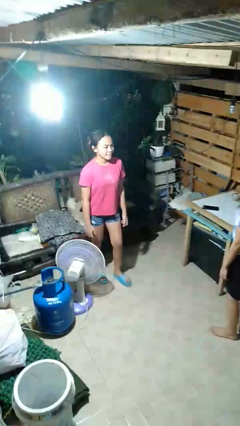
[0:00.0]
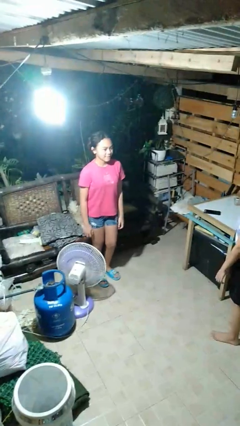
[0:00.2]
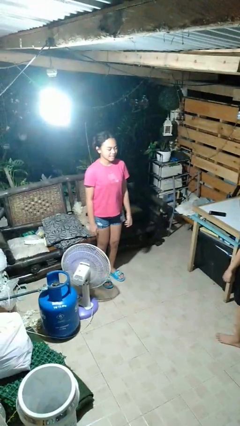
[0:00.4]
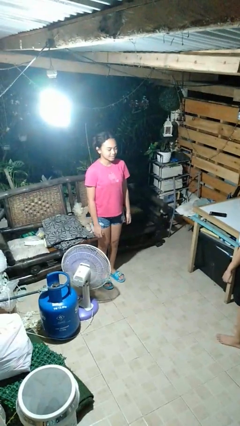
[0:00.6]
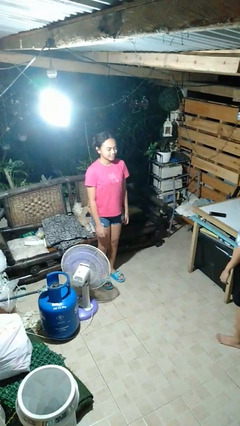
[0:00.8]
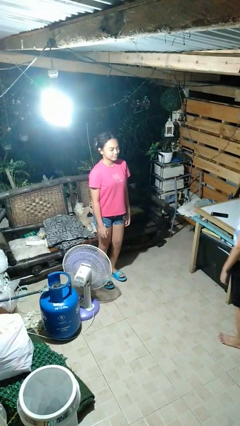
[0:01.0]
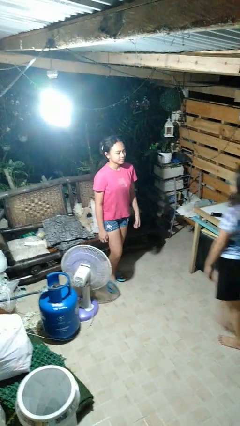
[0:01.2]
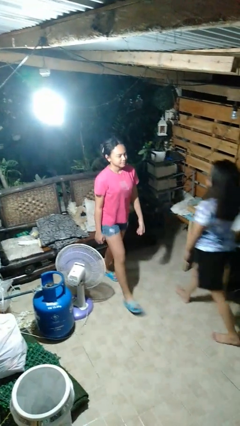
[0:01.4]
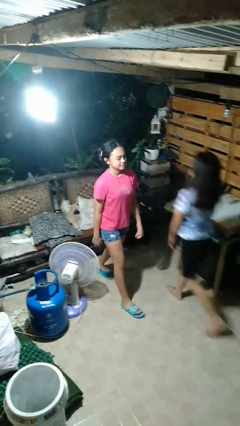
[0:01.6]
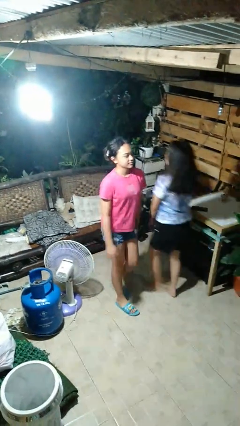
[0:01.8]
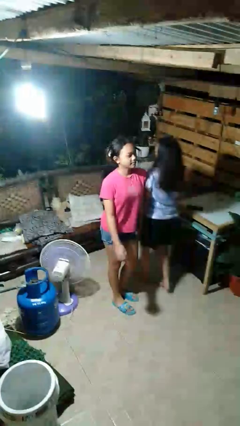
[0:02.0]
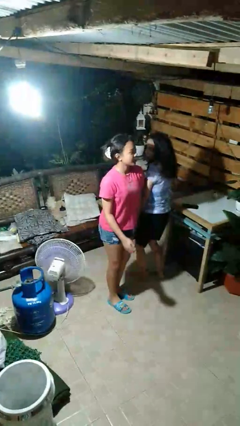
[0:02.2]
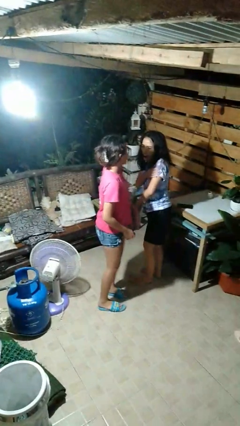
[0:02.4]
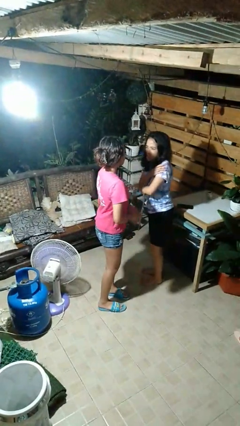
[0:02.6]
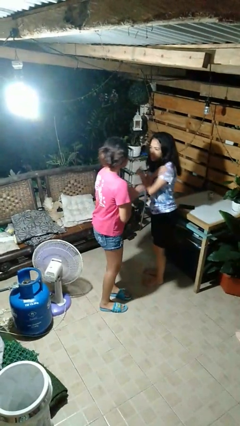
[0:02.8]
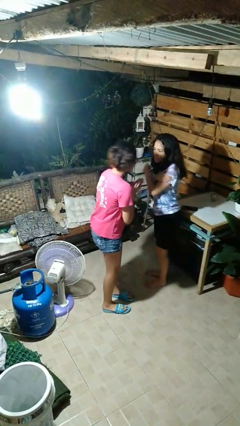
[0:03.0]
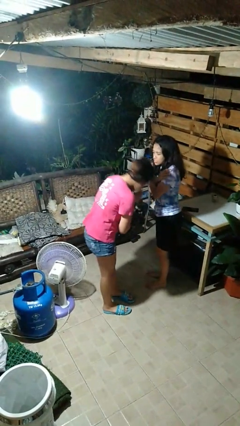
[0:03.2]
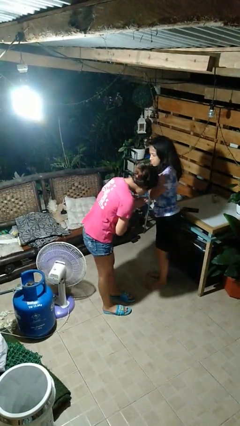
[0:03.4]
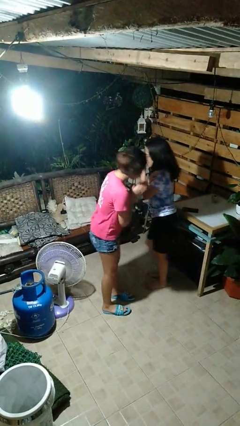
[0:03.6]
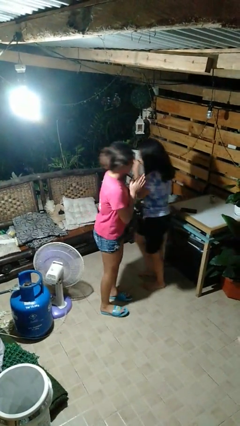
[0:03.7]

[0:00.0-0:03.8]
person bumps into person

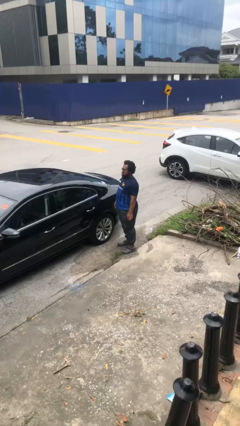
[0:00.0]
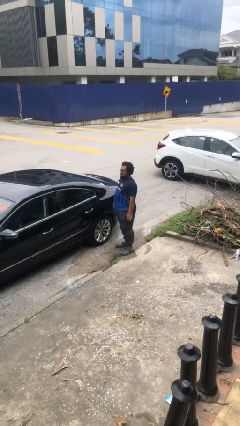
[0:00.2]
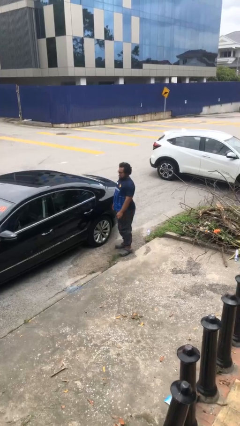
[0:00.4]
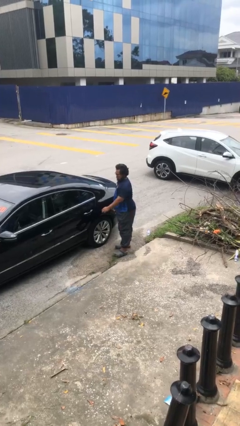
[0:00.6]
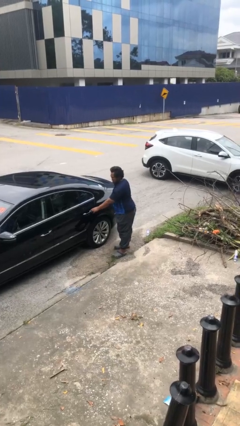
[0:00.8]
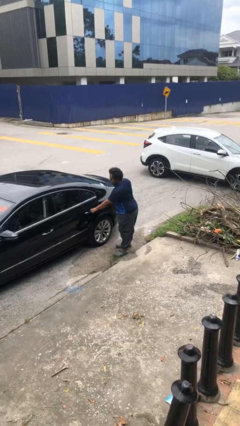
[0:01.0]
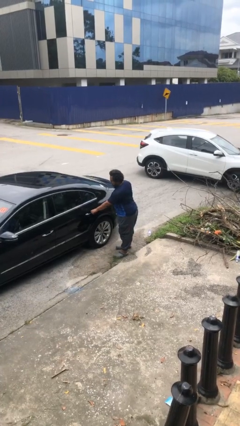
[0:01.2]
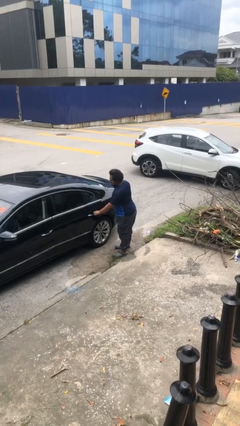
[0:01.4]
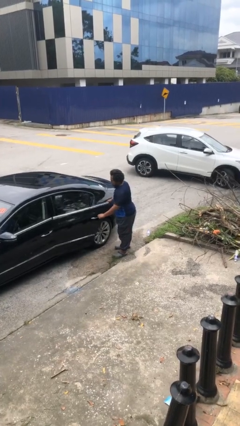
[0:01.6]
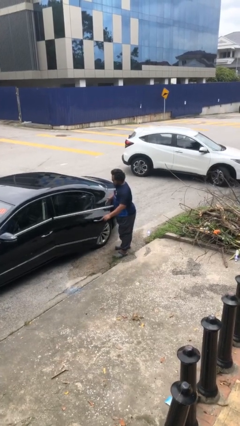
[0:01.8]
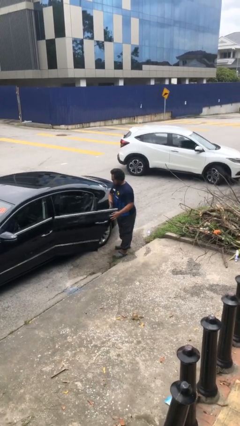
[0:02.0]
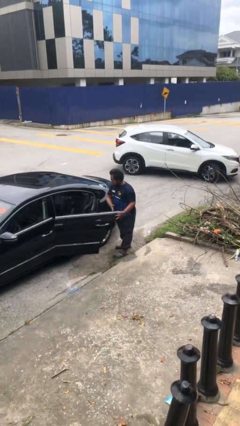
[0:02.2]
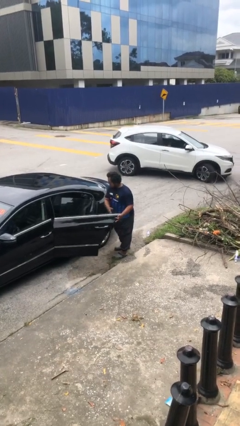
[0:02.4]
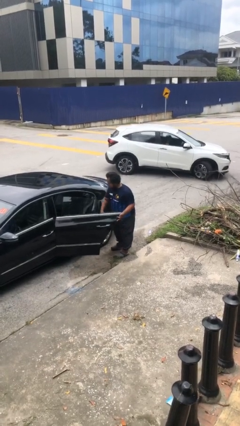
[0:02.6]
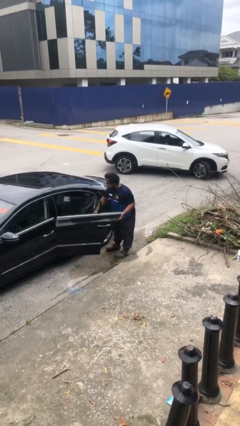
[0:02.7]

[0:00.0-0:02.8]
person opens car door

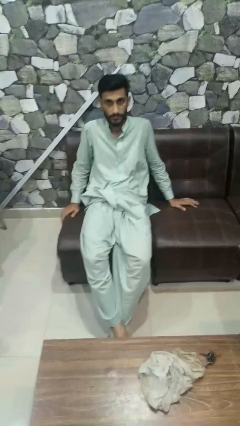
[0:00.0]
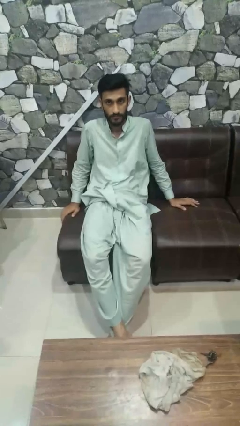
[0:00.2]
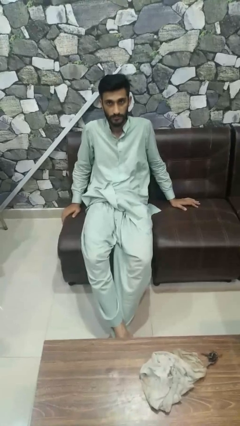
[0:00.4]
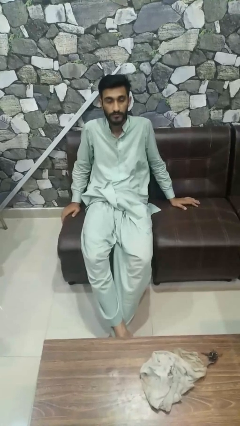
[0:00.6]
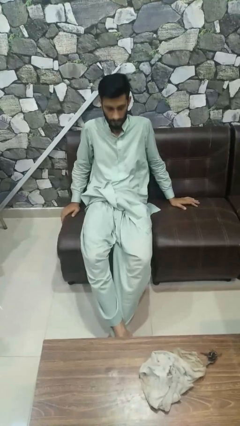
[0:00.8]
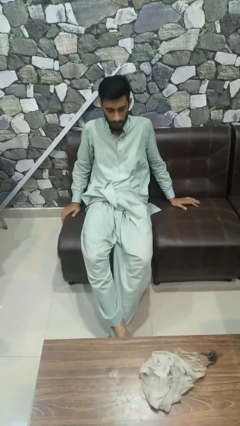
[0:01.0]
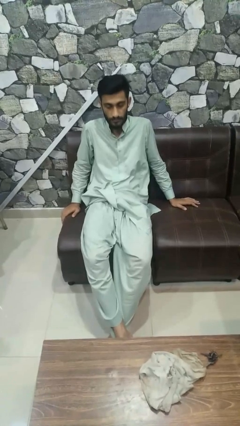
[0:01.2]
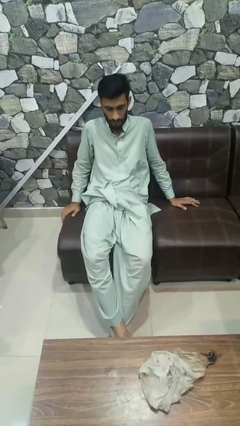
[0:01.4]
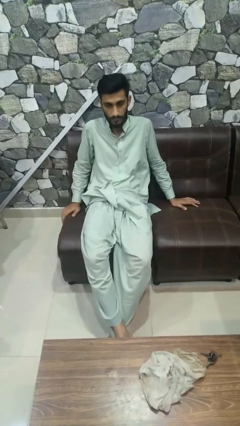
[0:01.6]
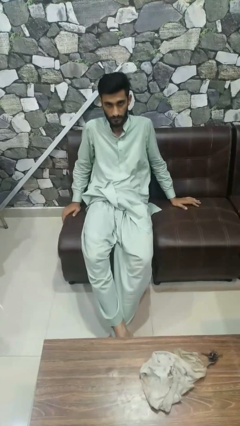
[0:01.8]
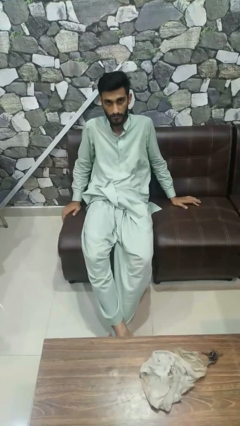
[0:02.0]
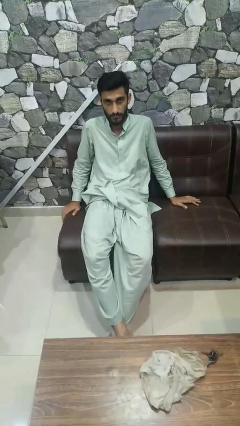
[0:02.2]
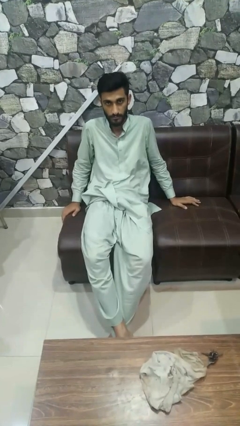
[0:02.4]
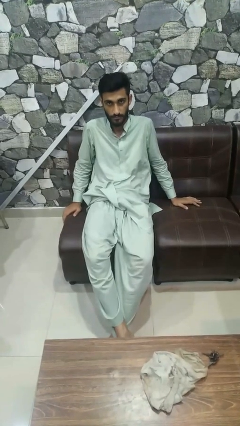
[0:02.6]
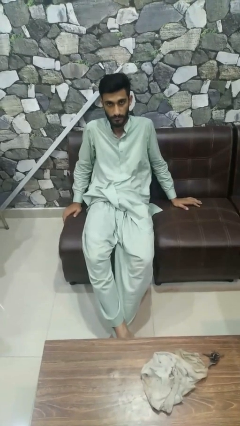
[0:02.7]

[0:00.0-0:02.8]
person nods head

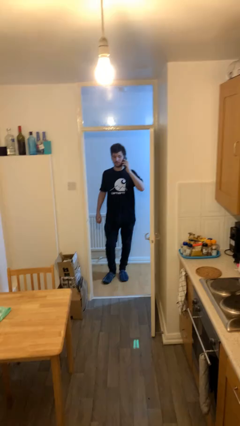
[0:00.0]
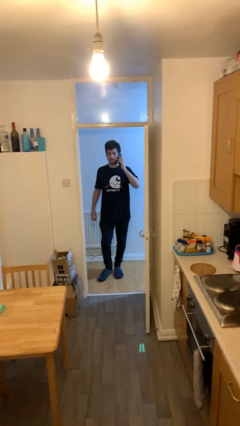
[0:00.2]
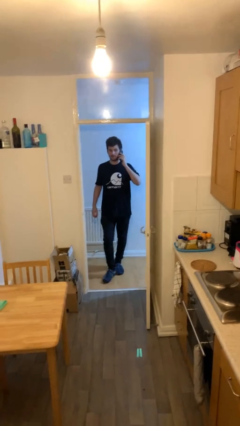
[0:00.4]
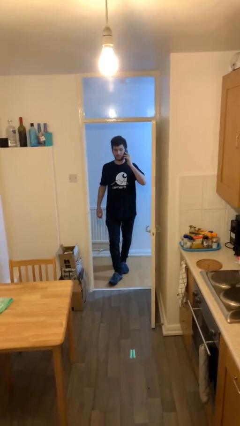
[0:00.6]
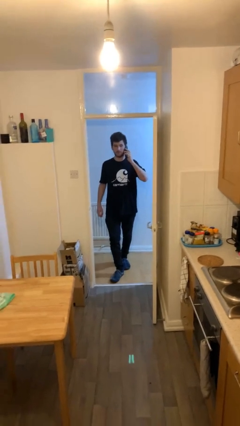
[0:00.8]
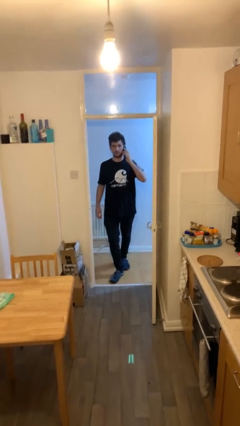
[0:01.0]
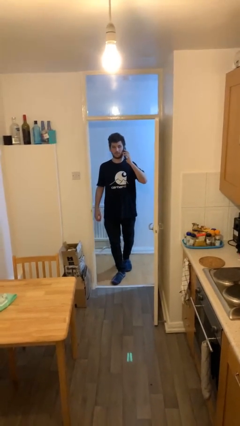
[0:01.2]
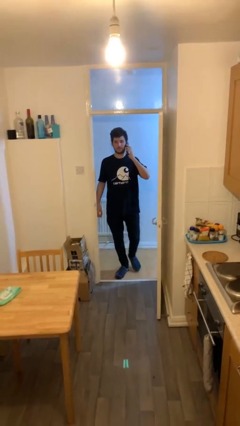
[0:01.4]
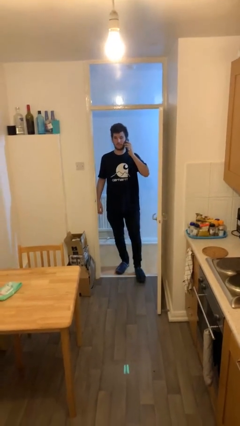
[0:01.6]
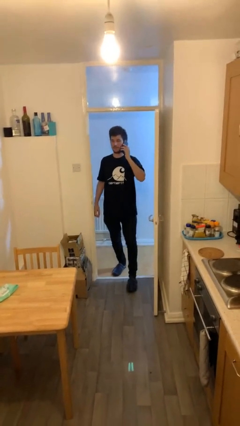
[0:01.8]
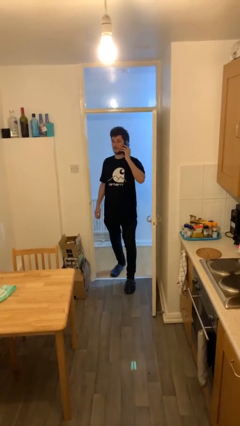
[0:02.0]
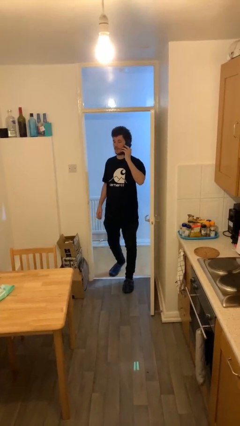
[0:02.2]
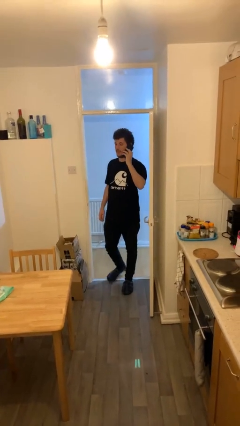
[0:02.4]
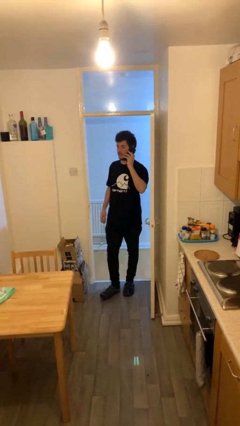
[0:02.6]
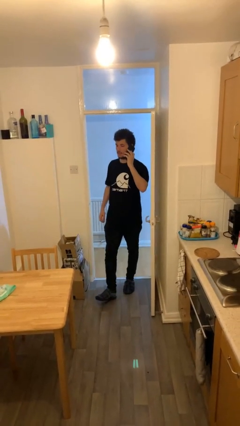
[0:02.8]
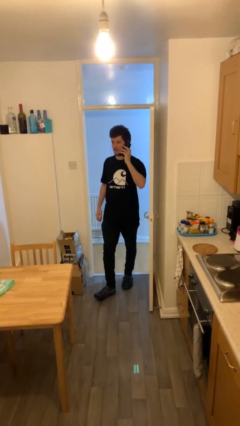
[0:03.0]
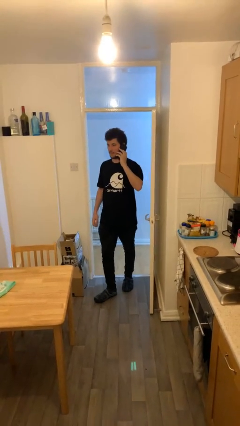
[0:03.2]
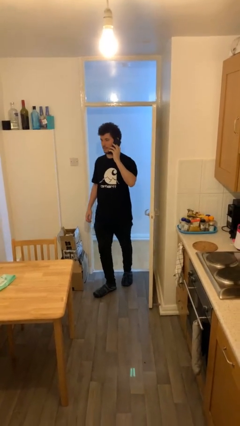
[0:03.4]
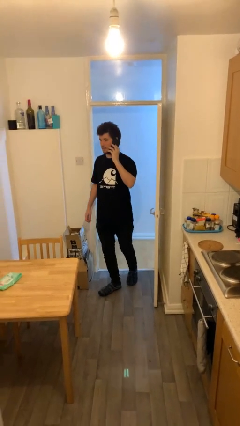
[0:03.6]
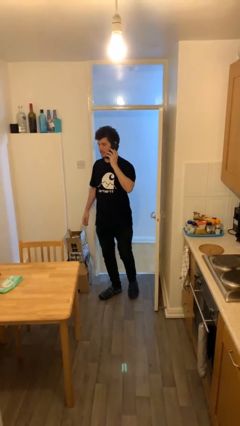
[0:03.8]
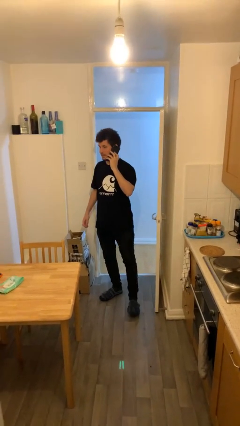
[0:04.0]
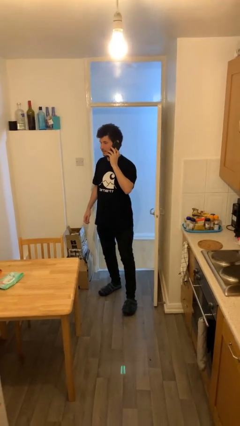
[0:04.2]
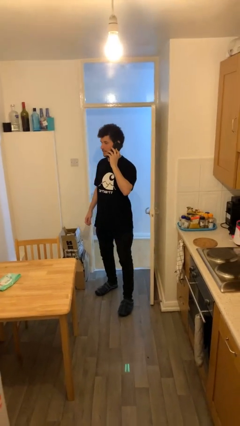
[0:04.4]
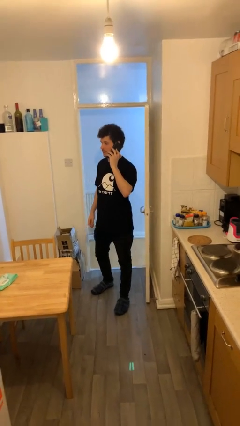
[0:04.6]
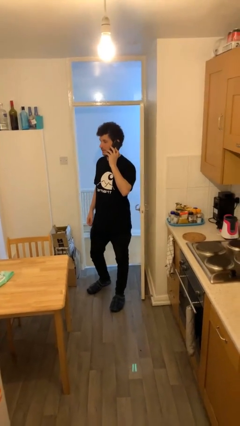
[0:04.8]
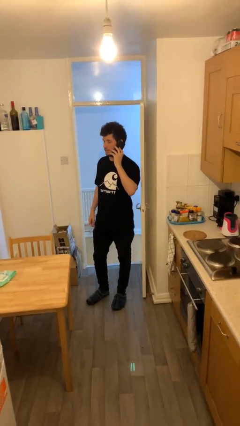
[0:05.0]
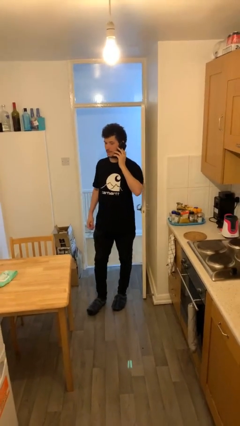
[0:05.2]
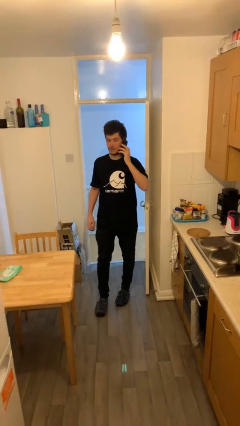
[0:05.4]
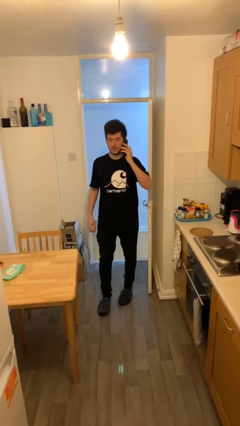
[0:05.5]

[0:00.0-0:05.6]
person enters scene through structure

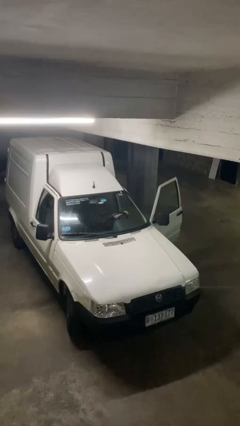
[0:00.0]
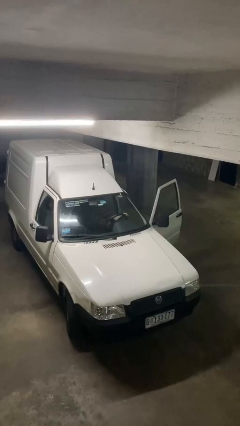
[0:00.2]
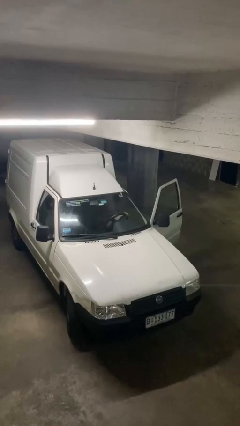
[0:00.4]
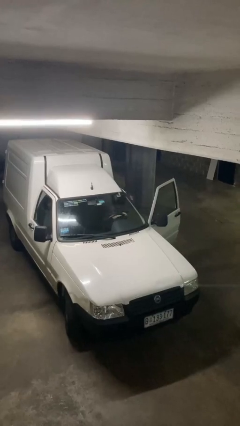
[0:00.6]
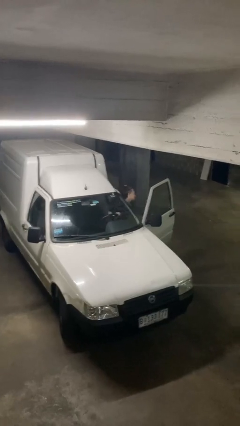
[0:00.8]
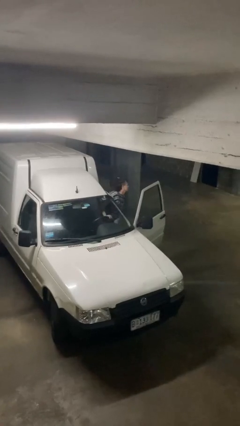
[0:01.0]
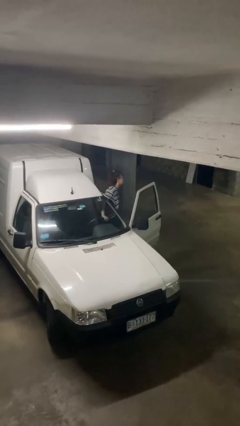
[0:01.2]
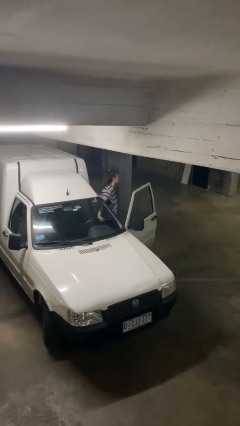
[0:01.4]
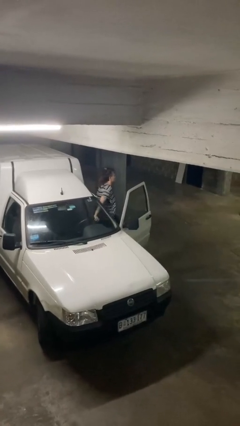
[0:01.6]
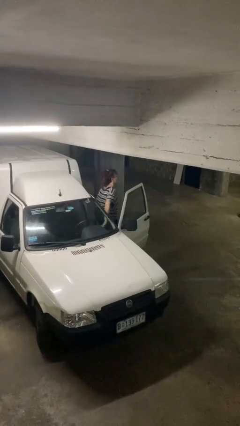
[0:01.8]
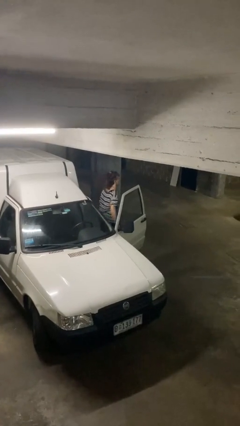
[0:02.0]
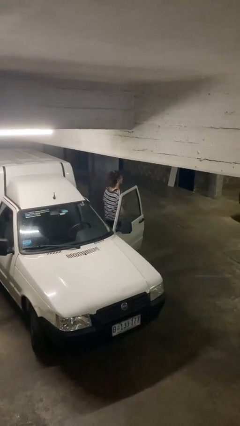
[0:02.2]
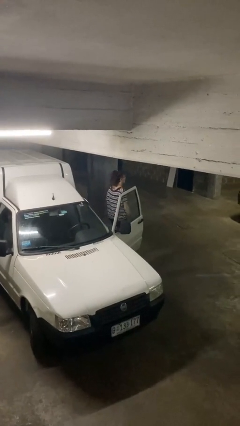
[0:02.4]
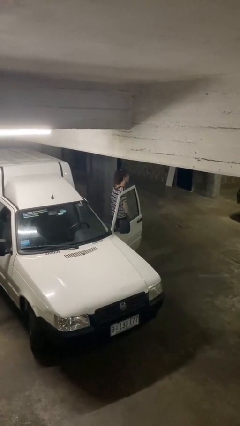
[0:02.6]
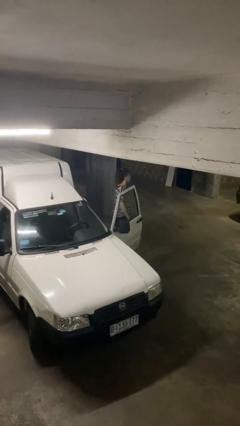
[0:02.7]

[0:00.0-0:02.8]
person exits car
